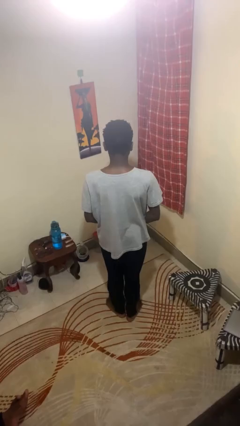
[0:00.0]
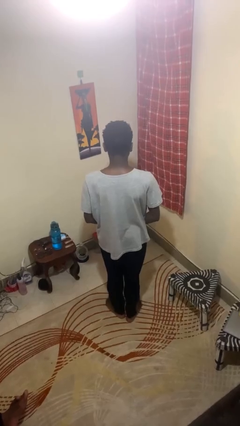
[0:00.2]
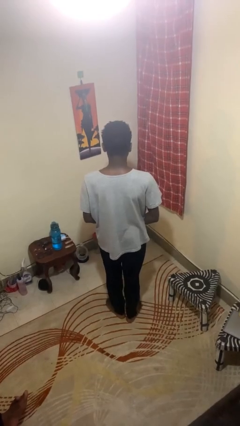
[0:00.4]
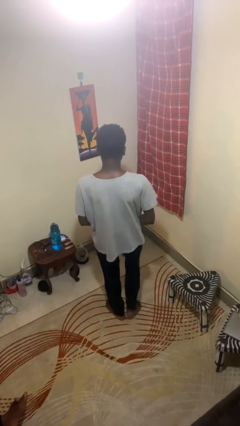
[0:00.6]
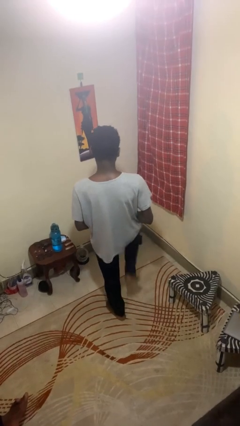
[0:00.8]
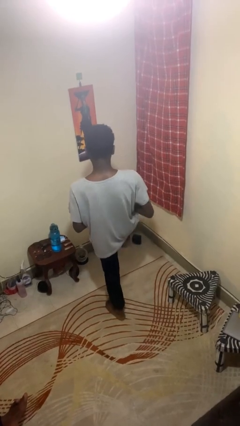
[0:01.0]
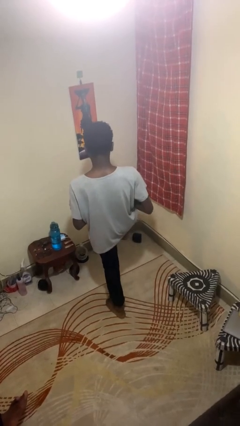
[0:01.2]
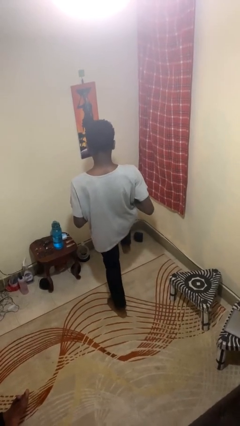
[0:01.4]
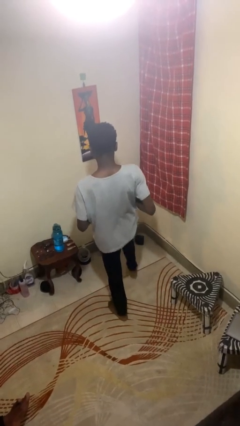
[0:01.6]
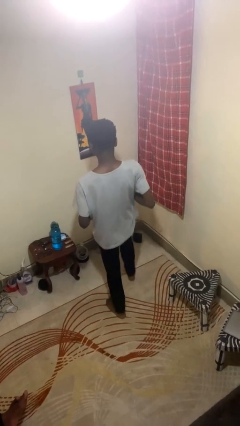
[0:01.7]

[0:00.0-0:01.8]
person karate kicks

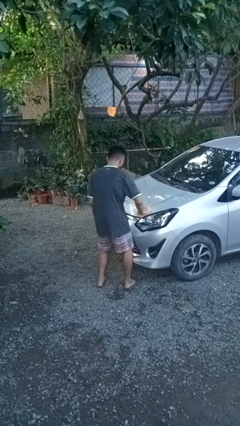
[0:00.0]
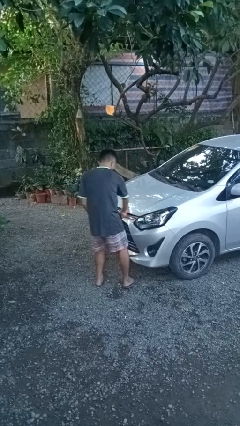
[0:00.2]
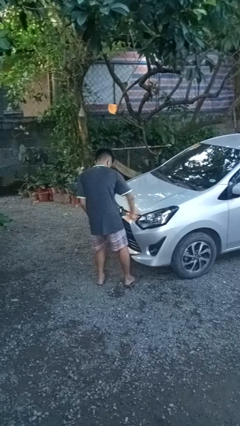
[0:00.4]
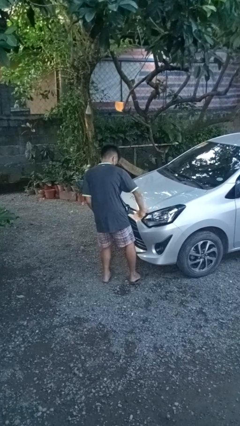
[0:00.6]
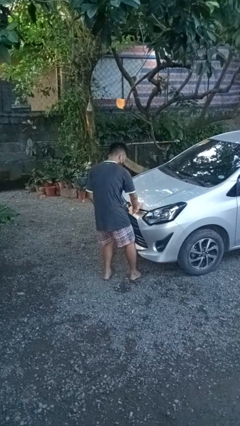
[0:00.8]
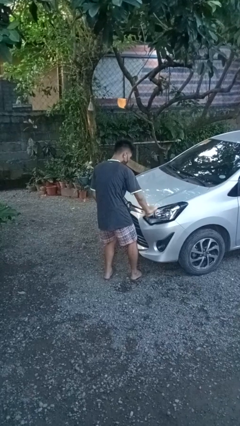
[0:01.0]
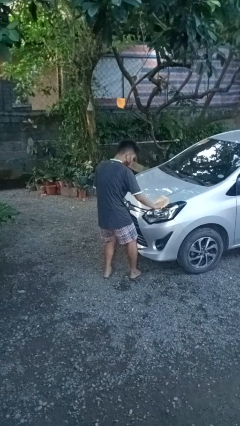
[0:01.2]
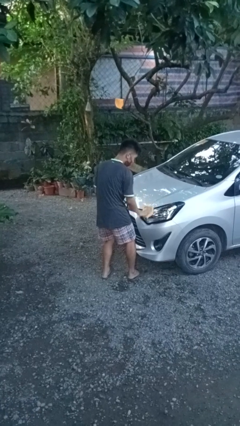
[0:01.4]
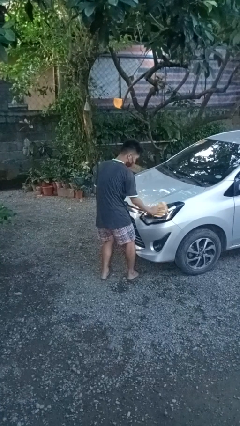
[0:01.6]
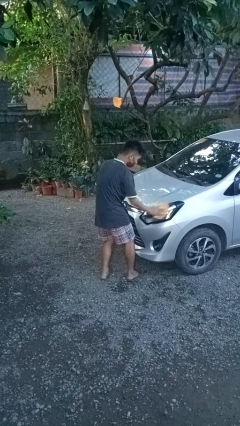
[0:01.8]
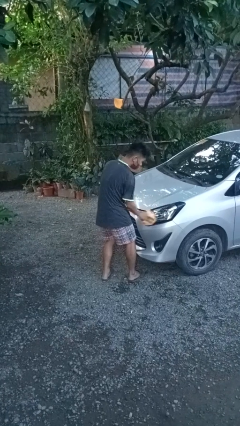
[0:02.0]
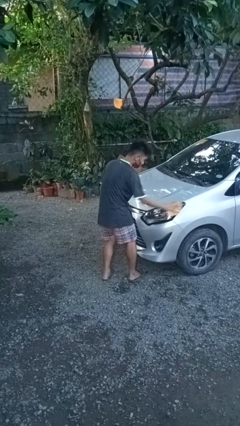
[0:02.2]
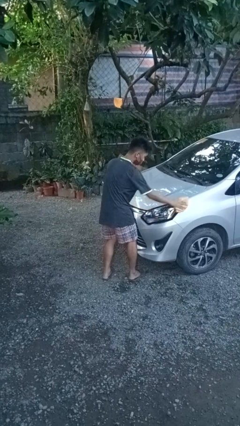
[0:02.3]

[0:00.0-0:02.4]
person polishes car with rag

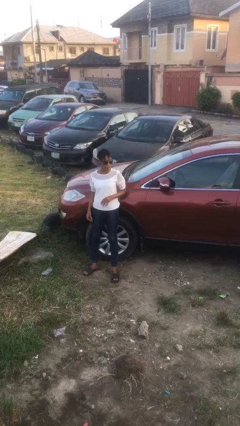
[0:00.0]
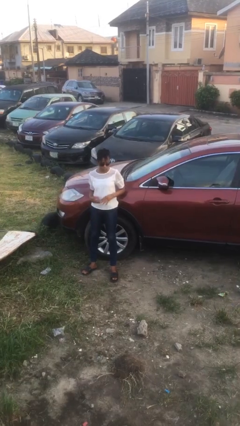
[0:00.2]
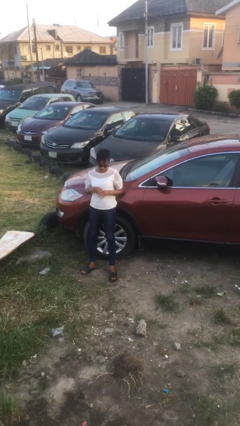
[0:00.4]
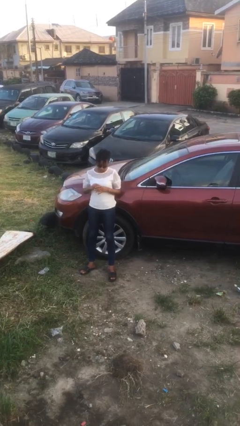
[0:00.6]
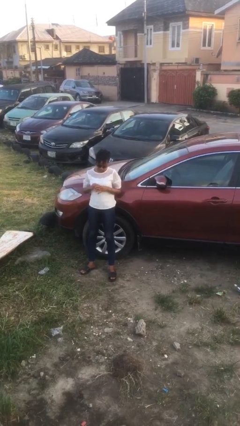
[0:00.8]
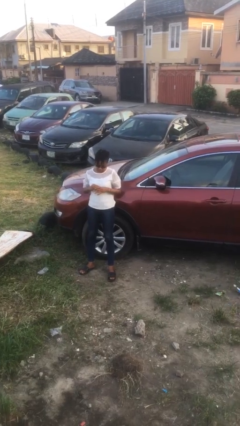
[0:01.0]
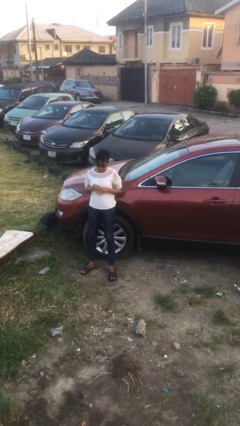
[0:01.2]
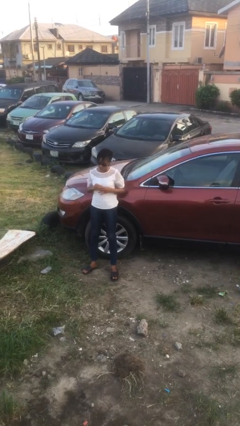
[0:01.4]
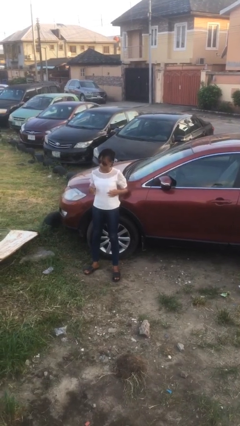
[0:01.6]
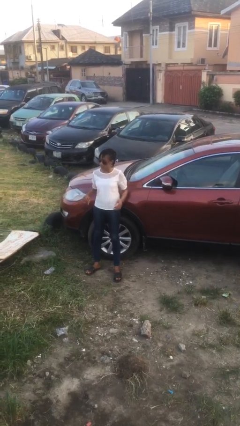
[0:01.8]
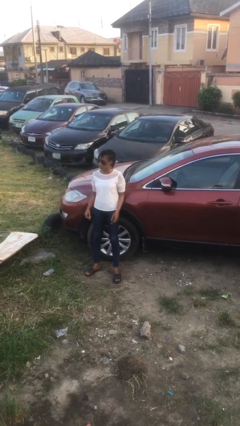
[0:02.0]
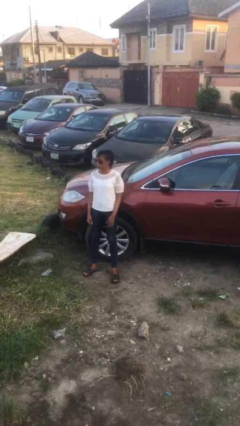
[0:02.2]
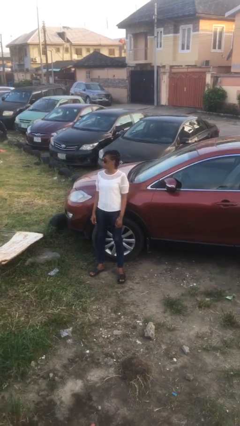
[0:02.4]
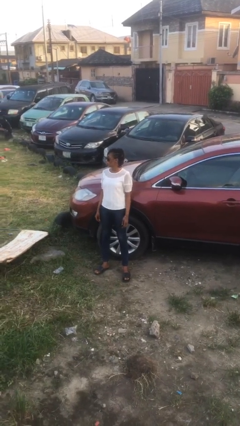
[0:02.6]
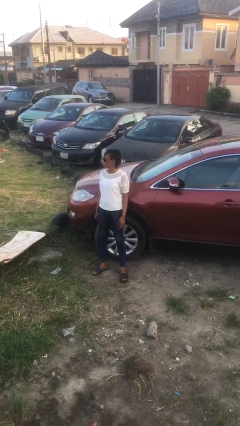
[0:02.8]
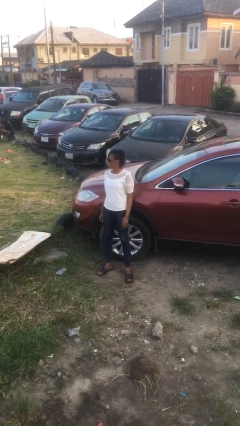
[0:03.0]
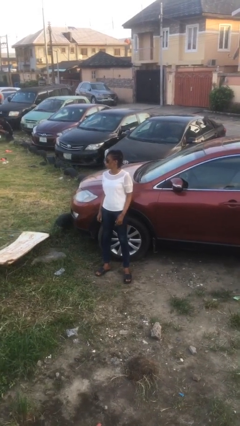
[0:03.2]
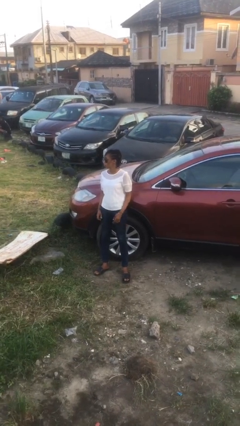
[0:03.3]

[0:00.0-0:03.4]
person takes off ring

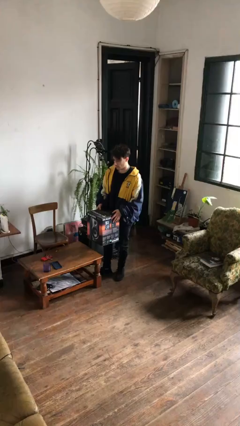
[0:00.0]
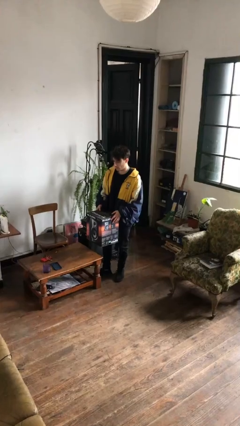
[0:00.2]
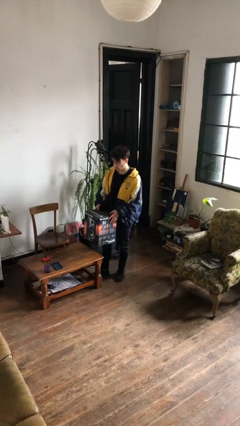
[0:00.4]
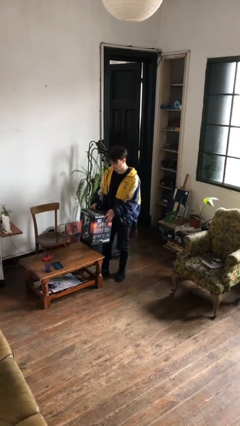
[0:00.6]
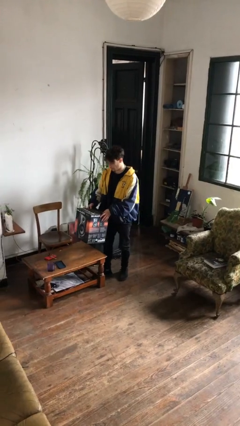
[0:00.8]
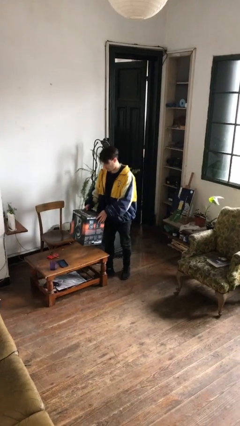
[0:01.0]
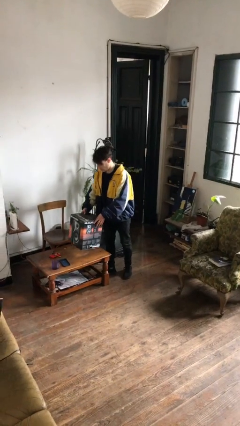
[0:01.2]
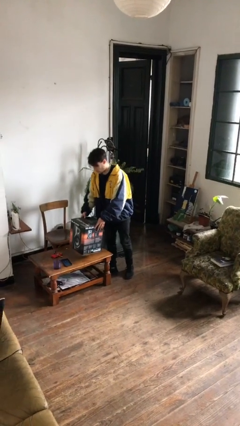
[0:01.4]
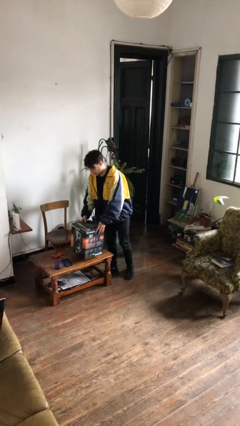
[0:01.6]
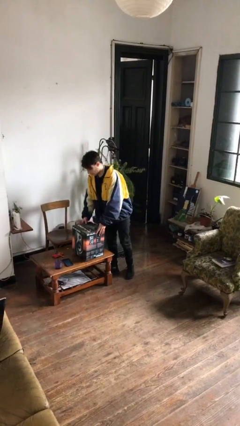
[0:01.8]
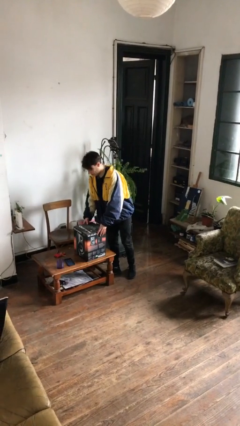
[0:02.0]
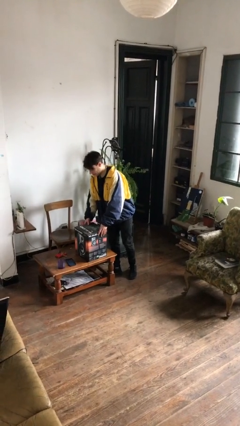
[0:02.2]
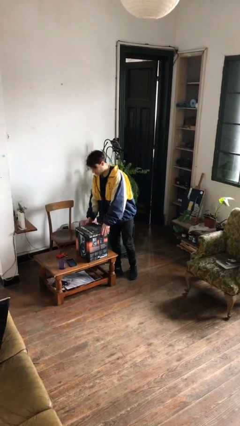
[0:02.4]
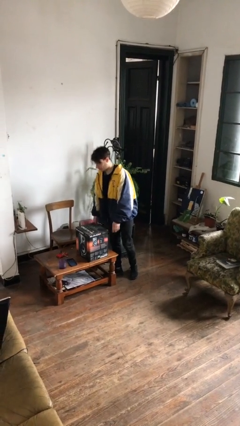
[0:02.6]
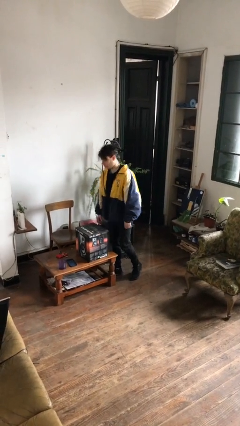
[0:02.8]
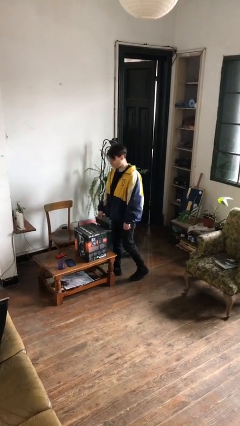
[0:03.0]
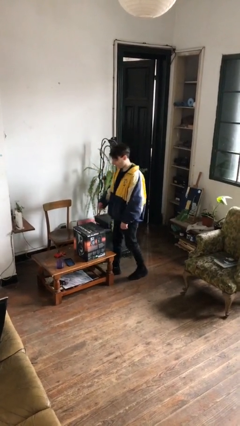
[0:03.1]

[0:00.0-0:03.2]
person puts down object on table

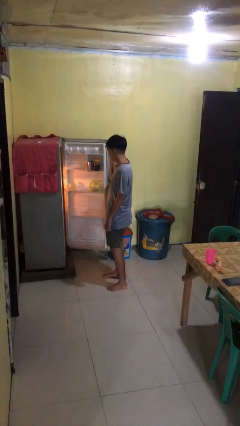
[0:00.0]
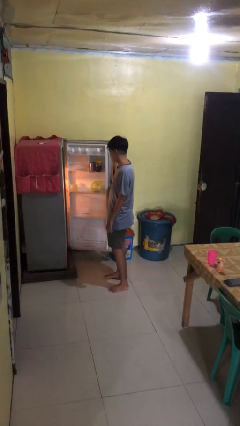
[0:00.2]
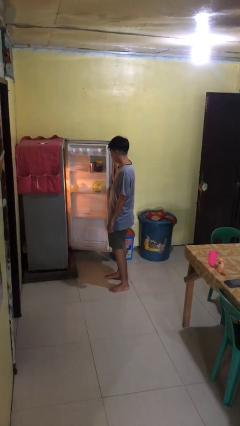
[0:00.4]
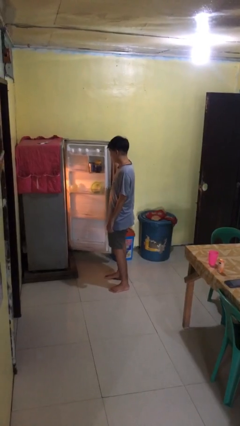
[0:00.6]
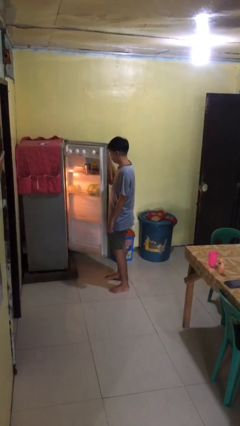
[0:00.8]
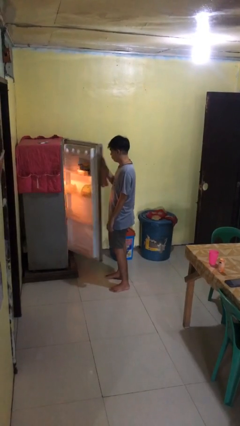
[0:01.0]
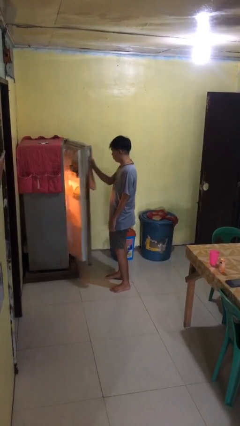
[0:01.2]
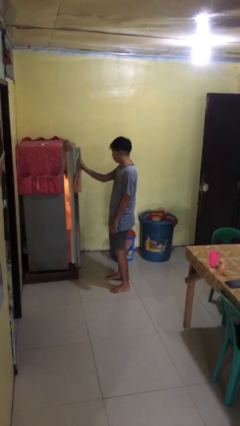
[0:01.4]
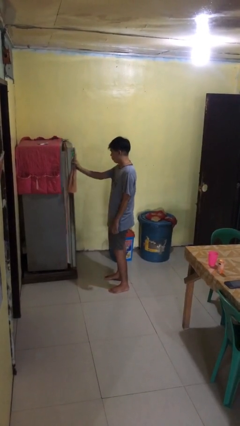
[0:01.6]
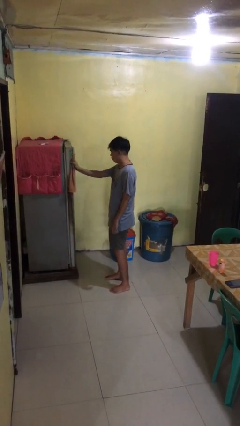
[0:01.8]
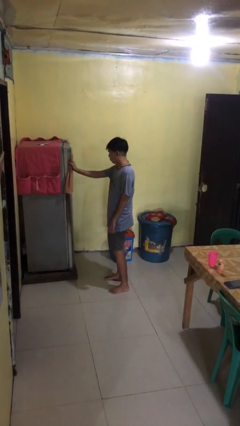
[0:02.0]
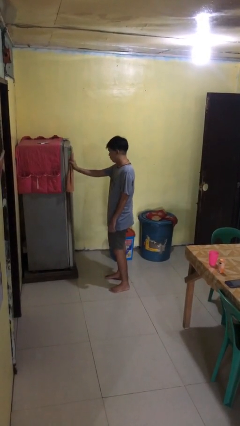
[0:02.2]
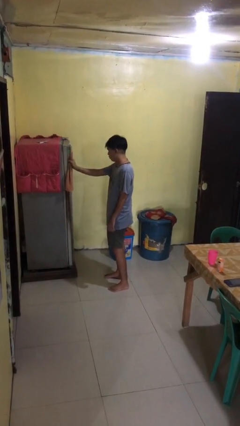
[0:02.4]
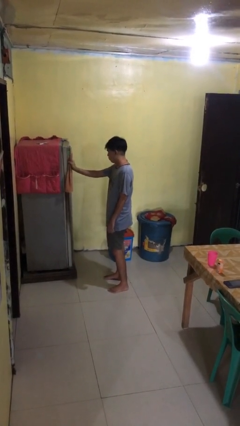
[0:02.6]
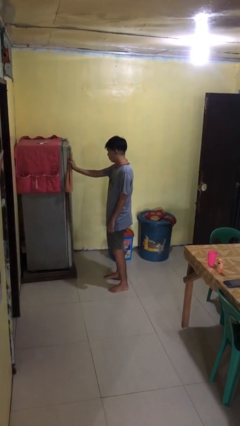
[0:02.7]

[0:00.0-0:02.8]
person closes refrigerator

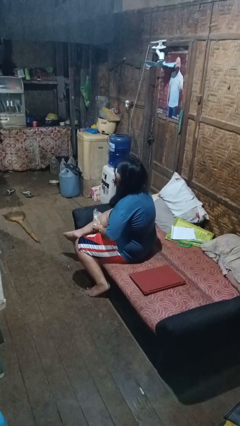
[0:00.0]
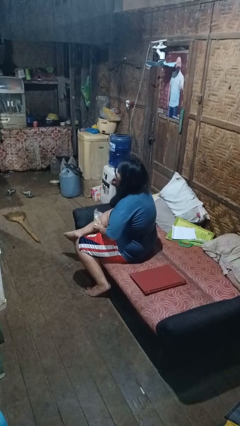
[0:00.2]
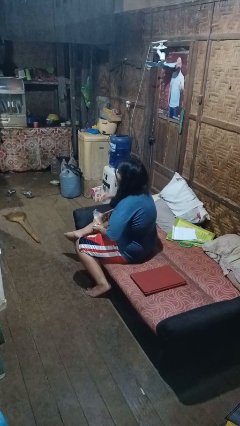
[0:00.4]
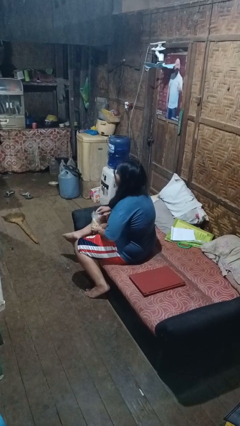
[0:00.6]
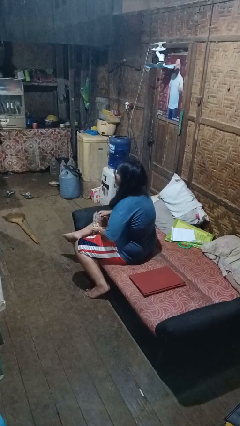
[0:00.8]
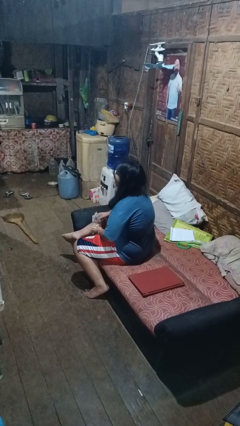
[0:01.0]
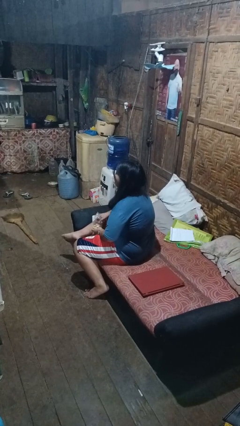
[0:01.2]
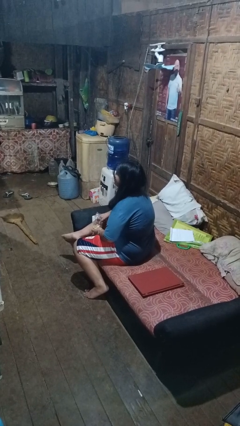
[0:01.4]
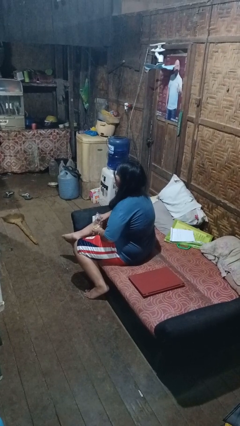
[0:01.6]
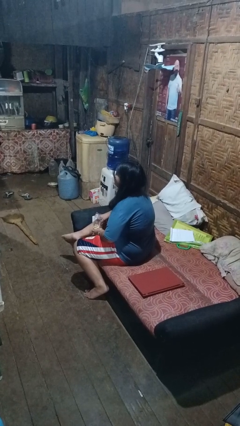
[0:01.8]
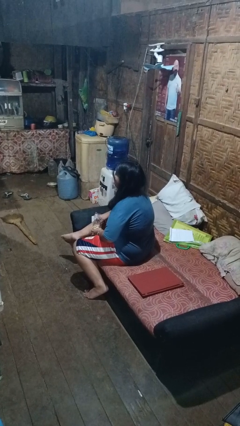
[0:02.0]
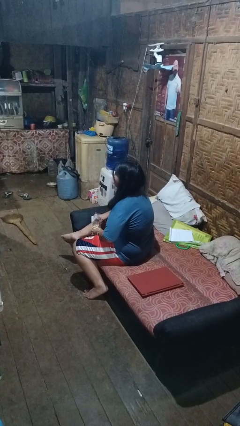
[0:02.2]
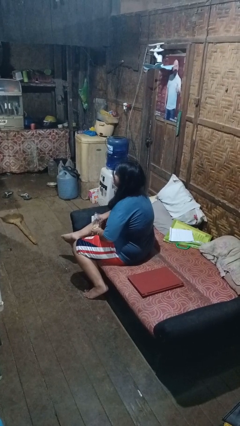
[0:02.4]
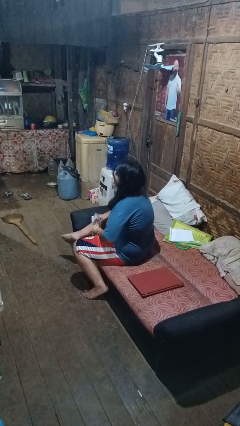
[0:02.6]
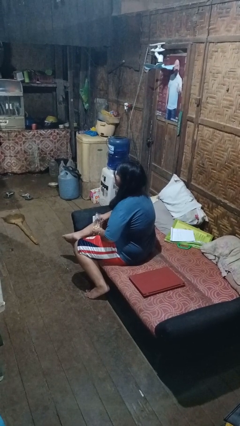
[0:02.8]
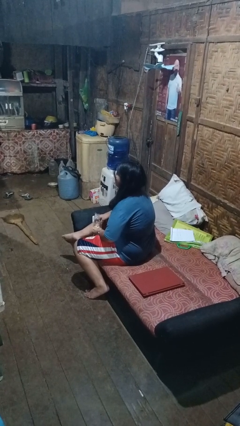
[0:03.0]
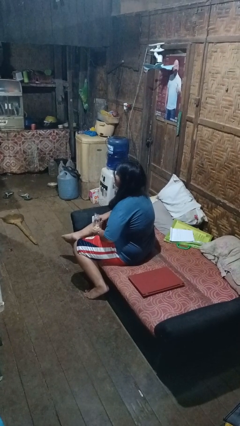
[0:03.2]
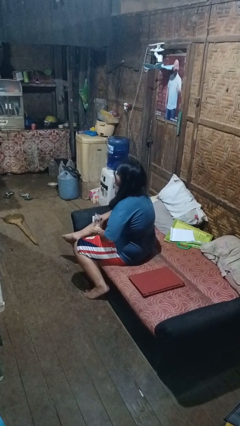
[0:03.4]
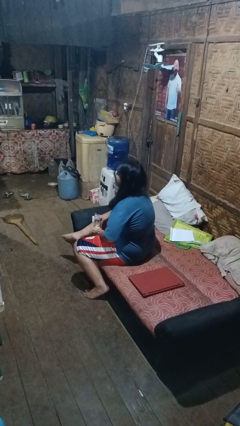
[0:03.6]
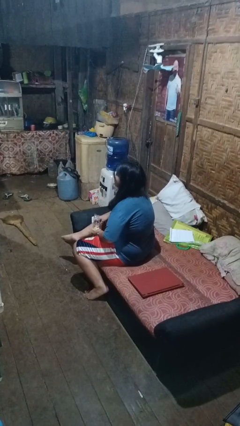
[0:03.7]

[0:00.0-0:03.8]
person eats snack from bag
